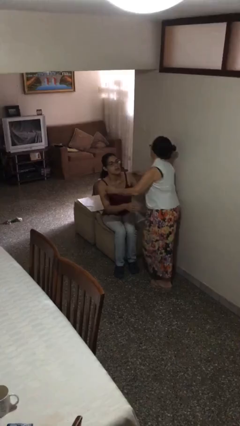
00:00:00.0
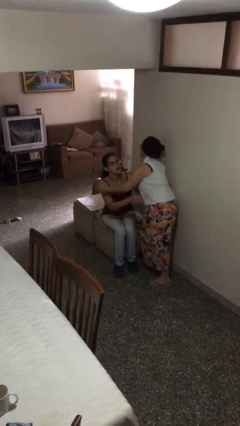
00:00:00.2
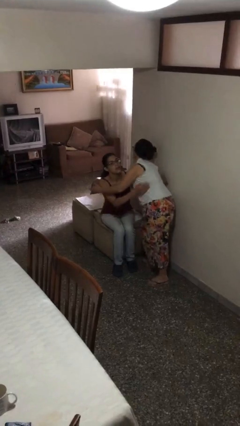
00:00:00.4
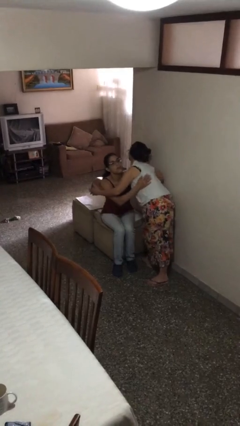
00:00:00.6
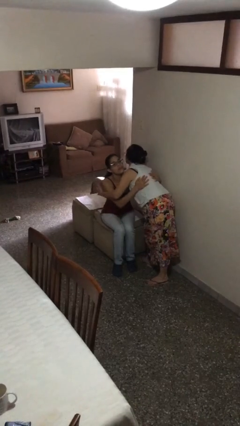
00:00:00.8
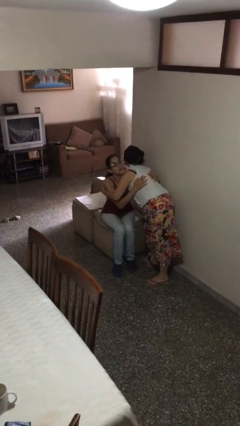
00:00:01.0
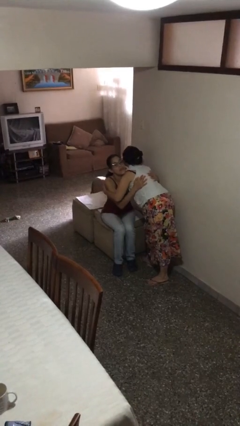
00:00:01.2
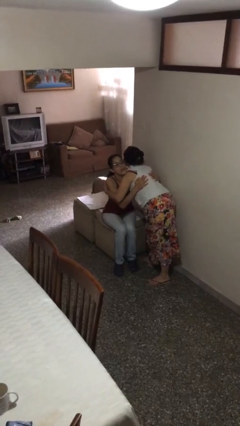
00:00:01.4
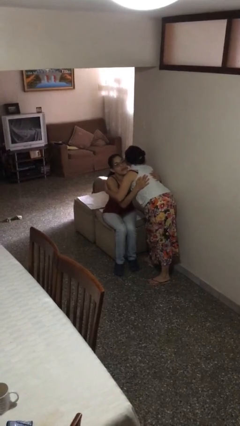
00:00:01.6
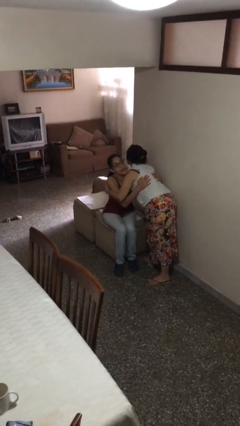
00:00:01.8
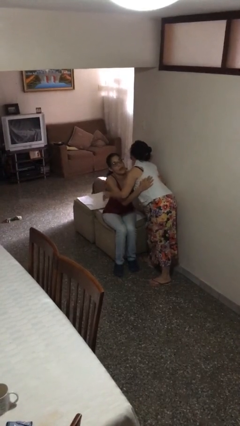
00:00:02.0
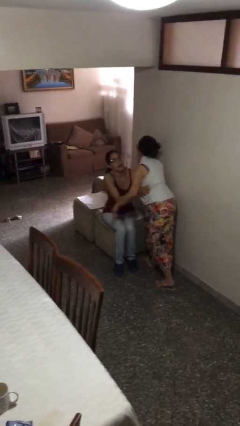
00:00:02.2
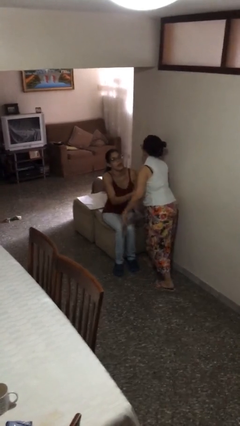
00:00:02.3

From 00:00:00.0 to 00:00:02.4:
person embraces person

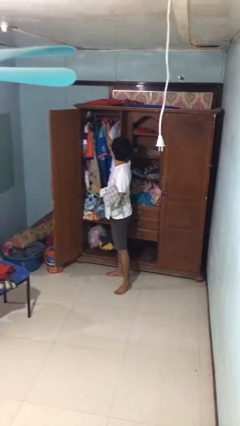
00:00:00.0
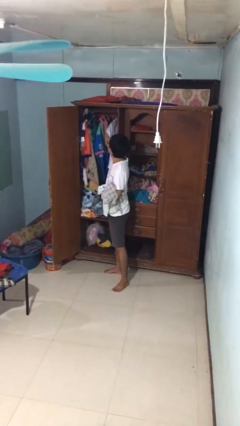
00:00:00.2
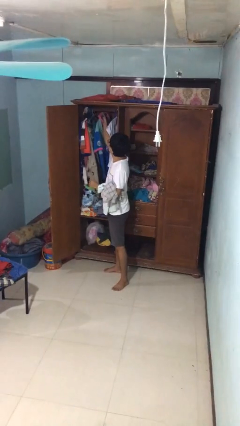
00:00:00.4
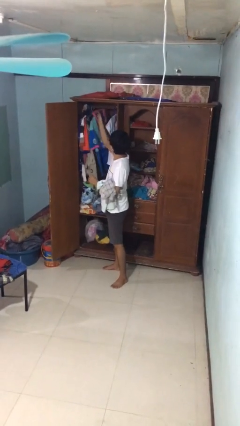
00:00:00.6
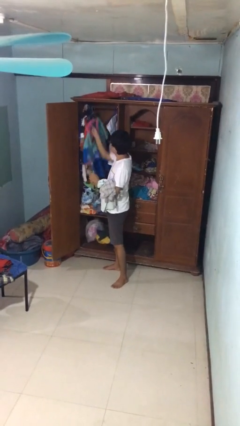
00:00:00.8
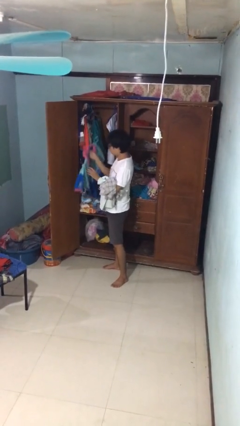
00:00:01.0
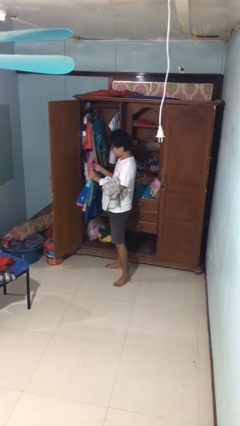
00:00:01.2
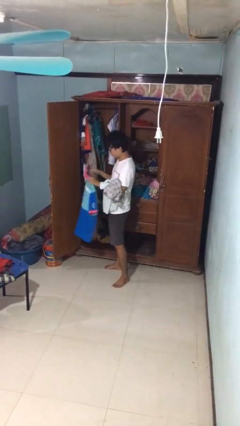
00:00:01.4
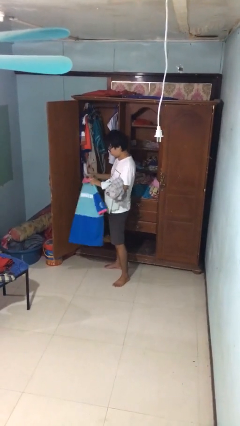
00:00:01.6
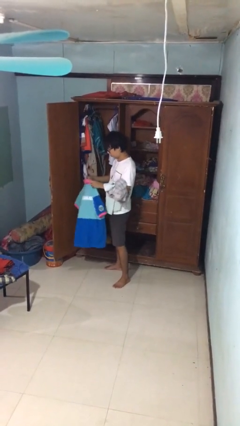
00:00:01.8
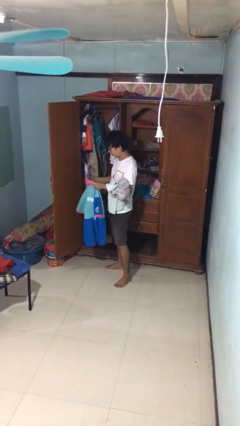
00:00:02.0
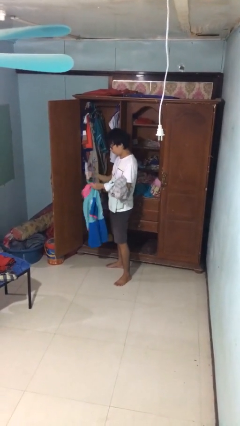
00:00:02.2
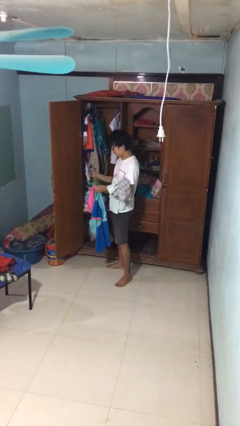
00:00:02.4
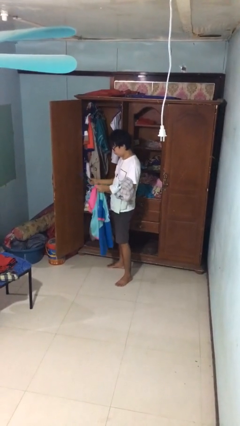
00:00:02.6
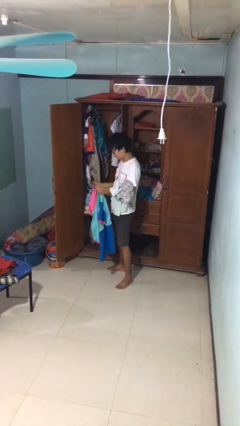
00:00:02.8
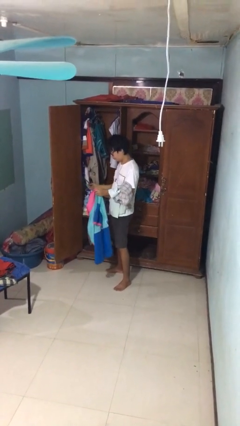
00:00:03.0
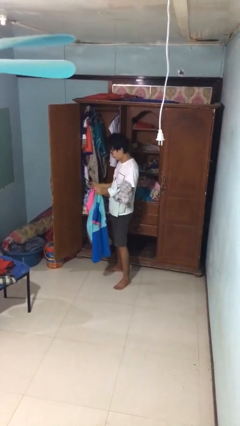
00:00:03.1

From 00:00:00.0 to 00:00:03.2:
person takes clothes from closet

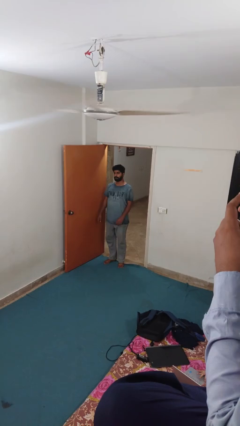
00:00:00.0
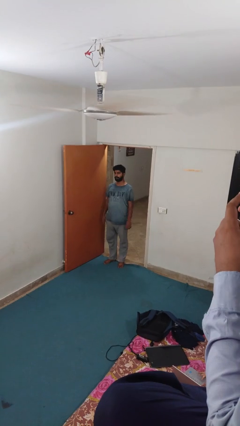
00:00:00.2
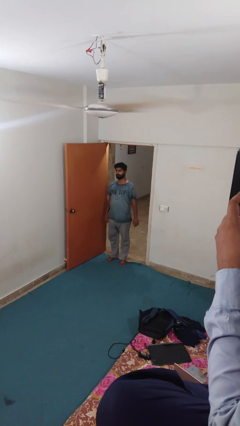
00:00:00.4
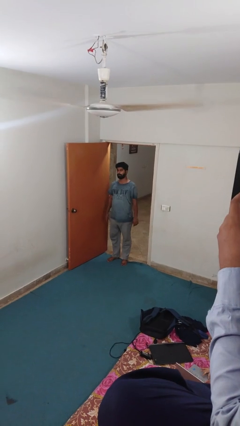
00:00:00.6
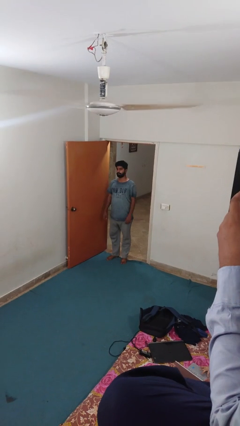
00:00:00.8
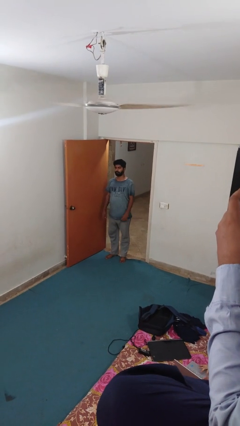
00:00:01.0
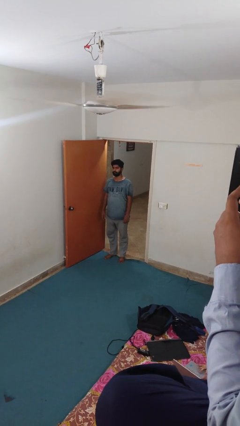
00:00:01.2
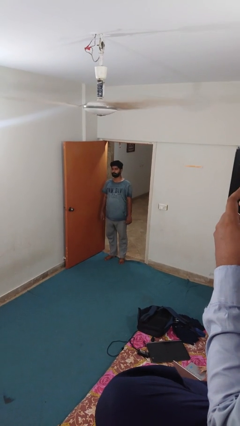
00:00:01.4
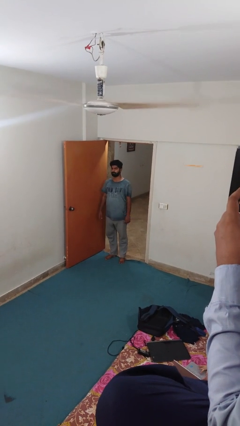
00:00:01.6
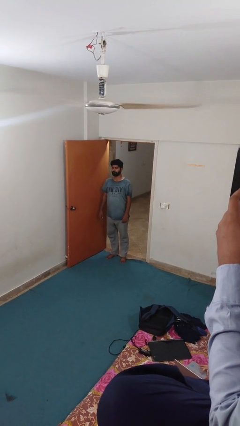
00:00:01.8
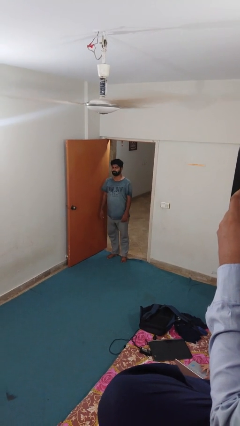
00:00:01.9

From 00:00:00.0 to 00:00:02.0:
person stands up from floor

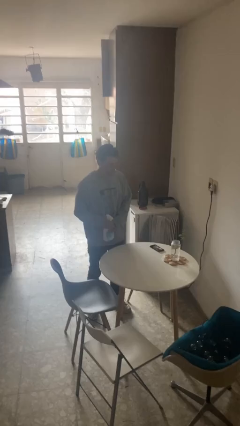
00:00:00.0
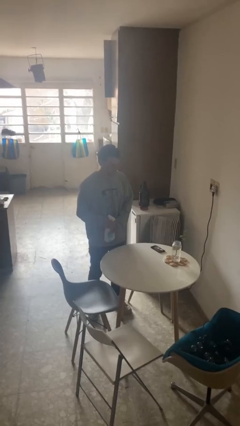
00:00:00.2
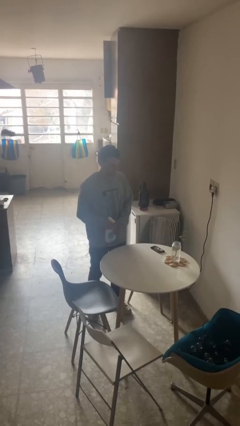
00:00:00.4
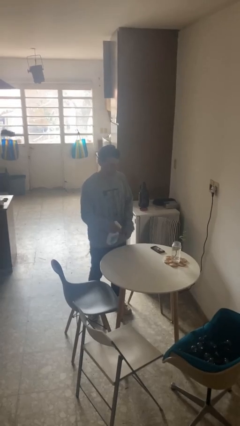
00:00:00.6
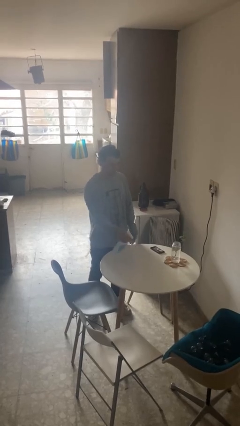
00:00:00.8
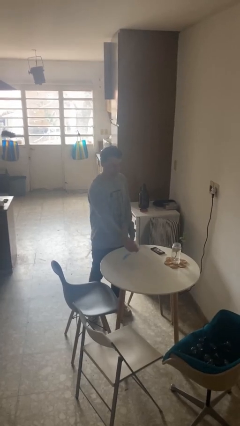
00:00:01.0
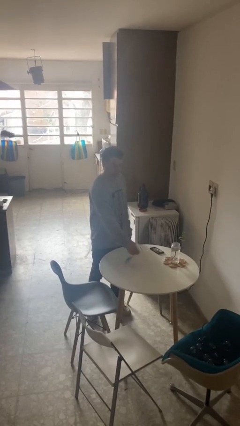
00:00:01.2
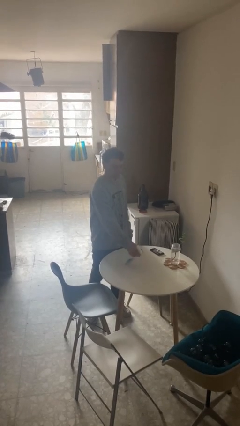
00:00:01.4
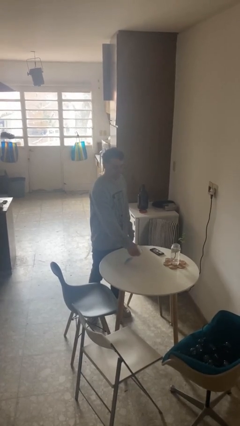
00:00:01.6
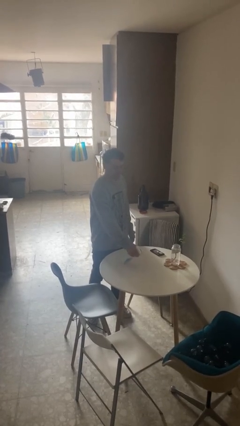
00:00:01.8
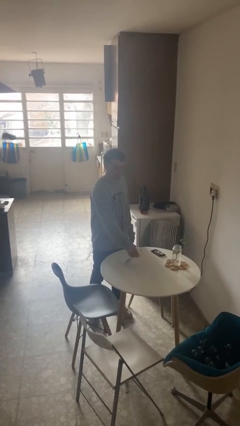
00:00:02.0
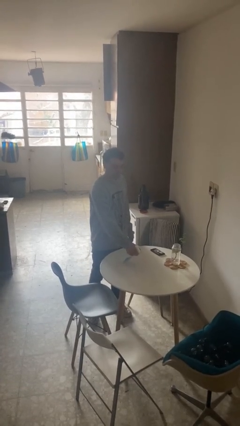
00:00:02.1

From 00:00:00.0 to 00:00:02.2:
person sprays from bottle

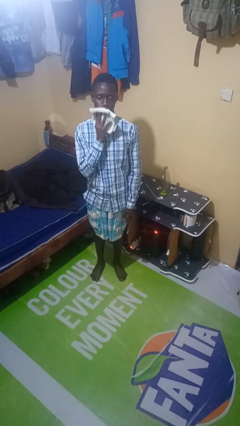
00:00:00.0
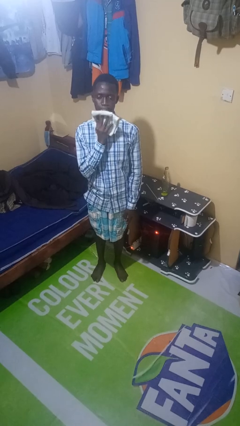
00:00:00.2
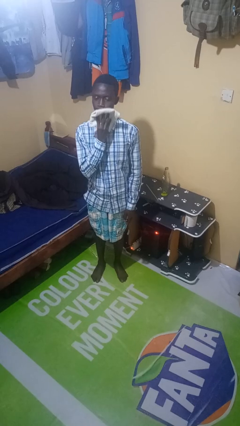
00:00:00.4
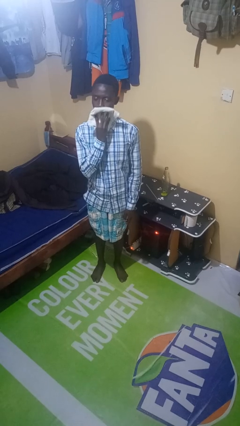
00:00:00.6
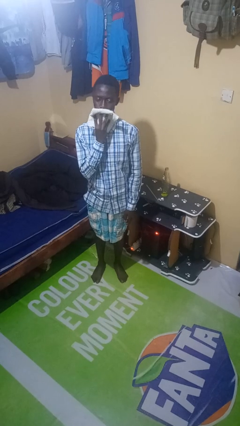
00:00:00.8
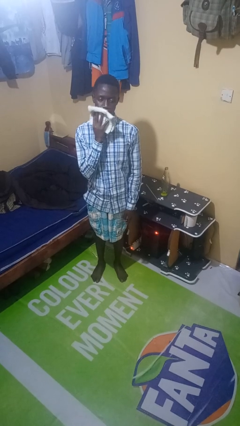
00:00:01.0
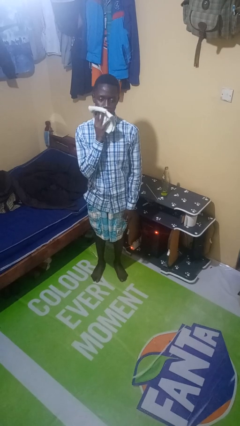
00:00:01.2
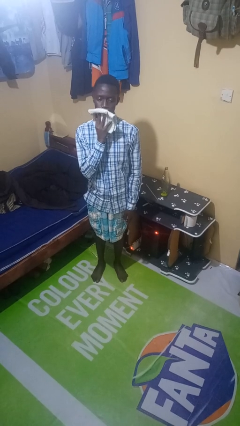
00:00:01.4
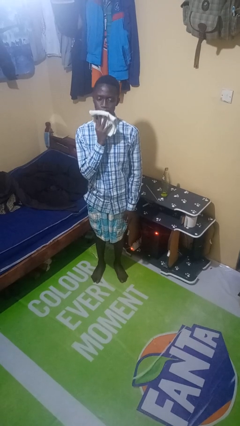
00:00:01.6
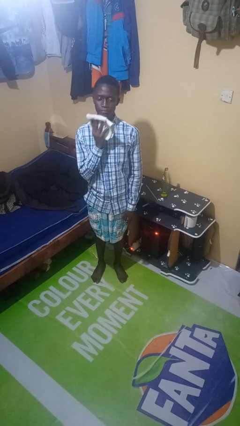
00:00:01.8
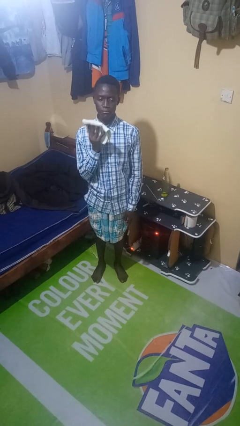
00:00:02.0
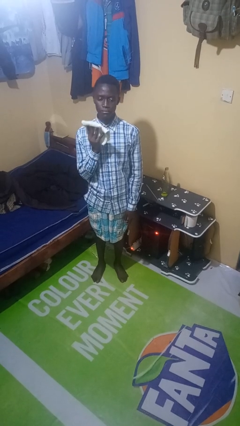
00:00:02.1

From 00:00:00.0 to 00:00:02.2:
person wipes mouth with napkin

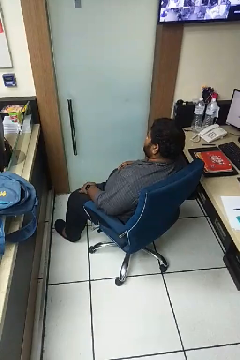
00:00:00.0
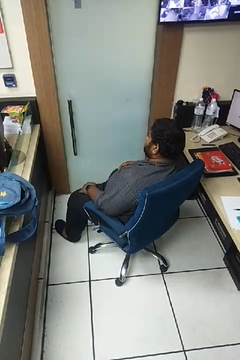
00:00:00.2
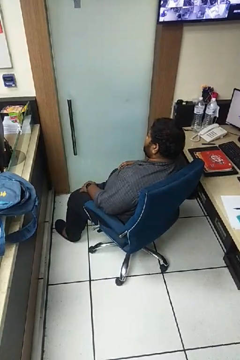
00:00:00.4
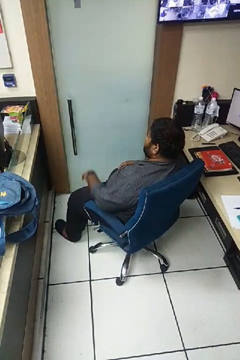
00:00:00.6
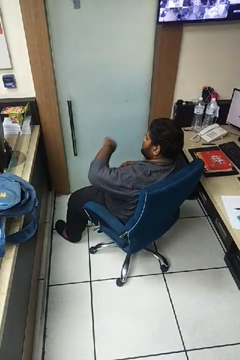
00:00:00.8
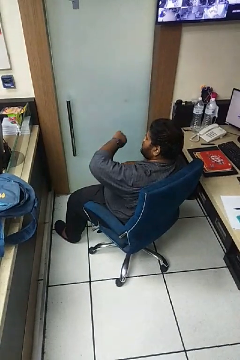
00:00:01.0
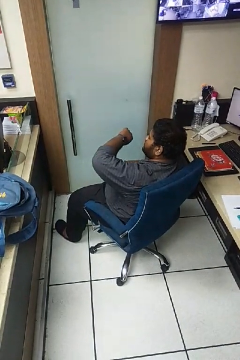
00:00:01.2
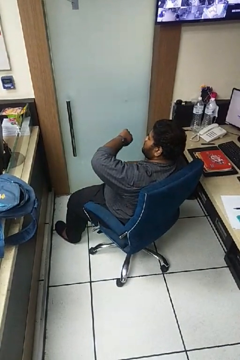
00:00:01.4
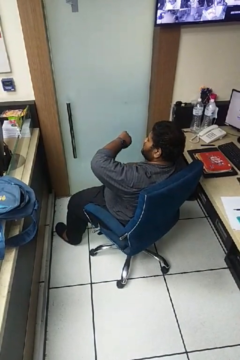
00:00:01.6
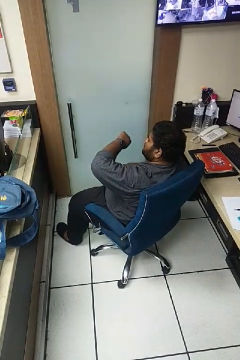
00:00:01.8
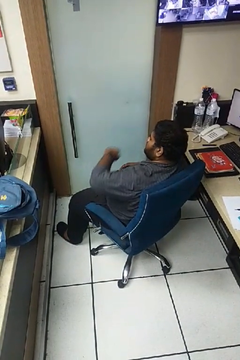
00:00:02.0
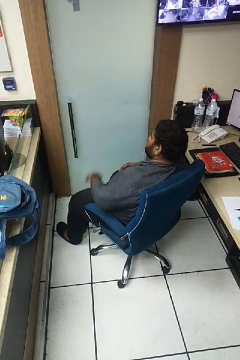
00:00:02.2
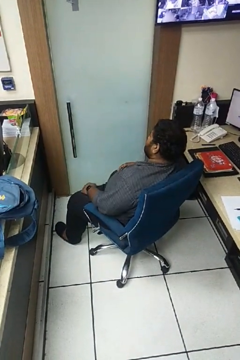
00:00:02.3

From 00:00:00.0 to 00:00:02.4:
person looks at wristwatch

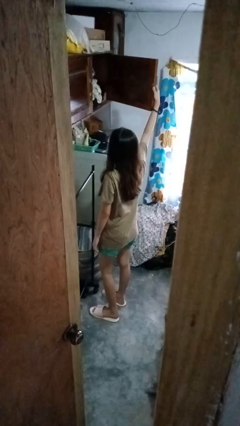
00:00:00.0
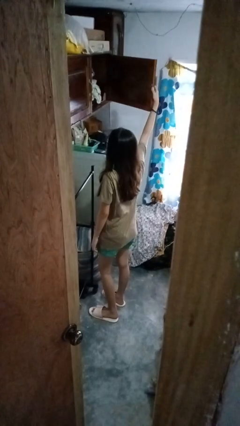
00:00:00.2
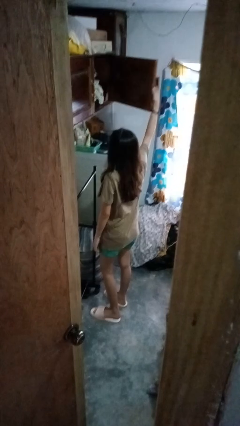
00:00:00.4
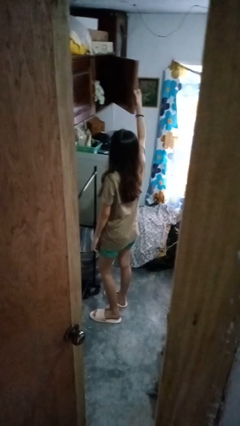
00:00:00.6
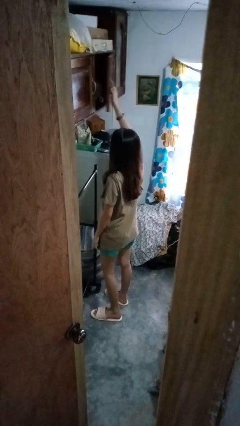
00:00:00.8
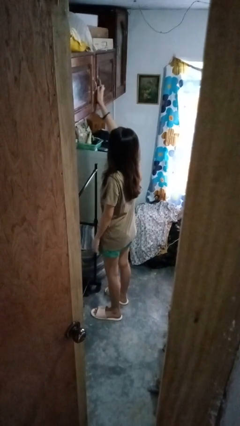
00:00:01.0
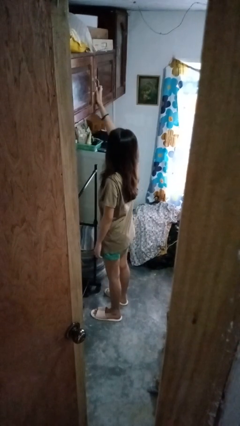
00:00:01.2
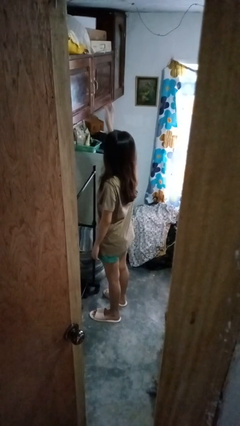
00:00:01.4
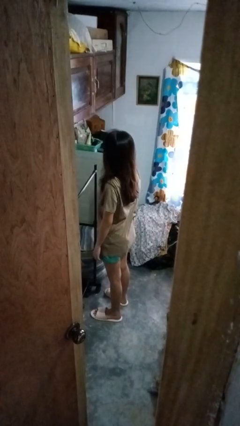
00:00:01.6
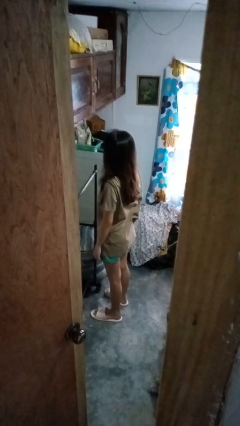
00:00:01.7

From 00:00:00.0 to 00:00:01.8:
person closes closet door

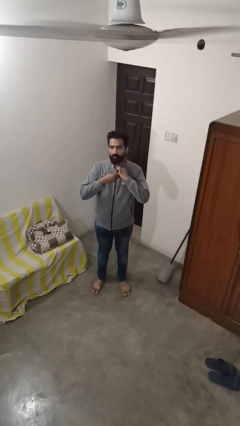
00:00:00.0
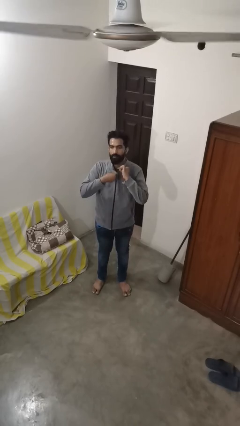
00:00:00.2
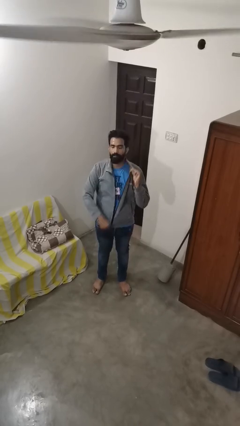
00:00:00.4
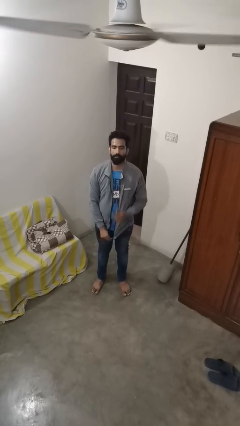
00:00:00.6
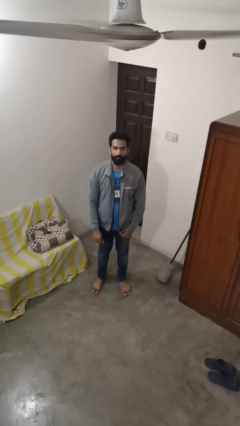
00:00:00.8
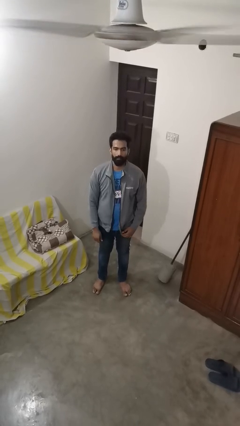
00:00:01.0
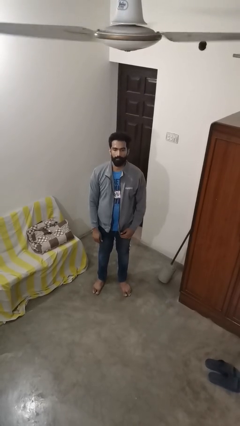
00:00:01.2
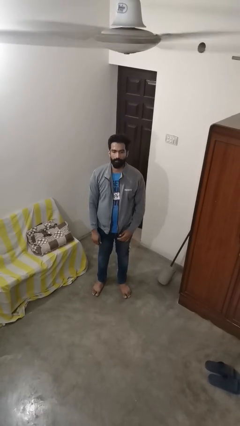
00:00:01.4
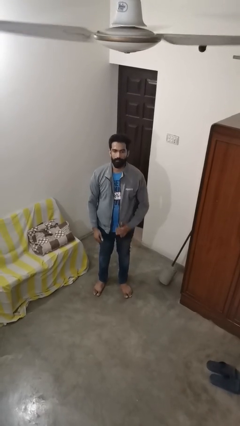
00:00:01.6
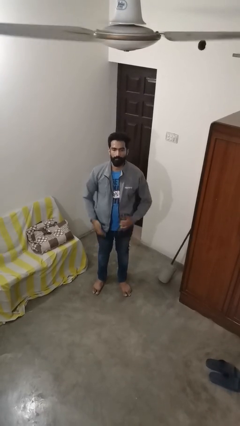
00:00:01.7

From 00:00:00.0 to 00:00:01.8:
person unzips jacket
